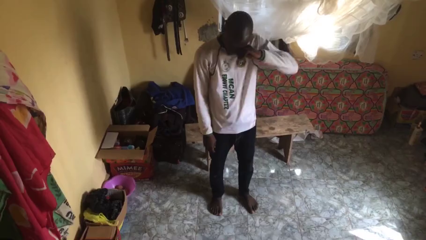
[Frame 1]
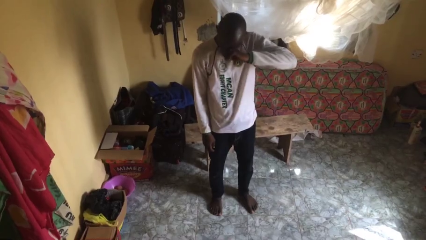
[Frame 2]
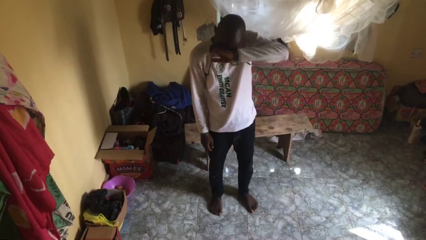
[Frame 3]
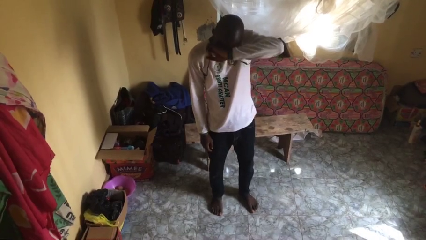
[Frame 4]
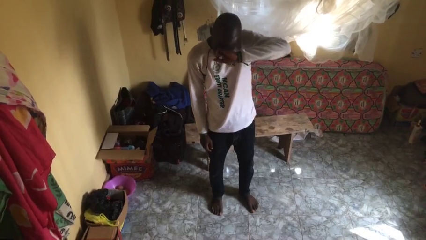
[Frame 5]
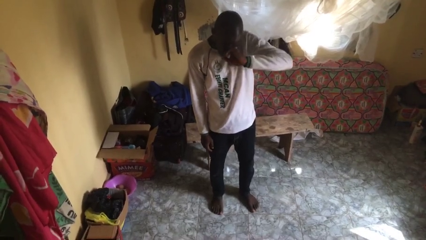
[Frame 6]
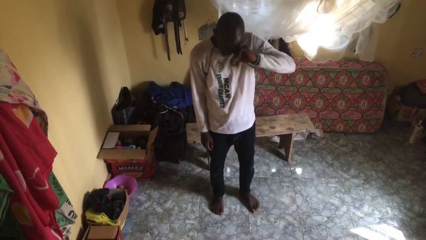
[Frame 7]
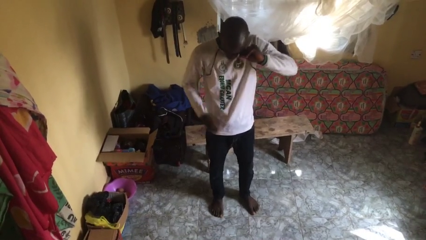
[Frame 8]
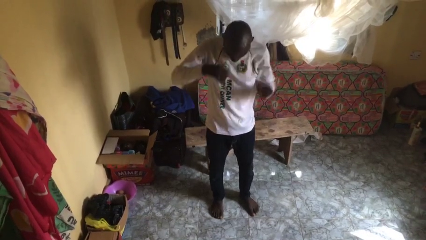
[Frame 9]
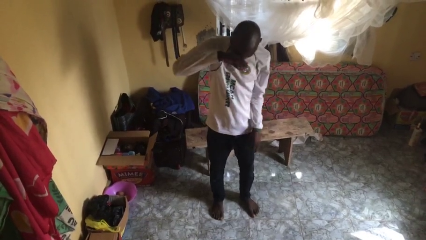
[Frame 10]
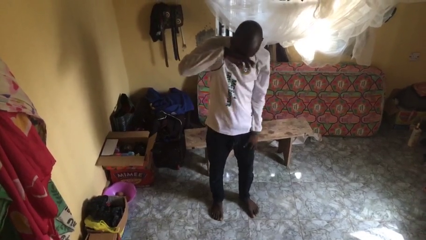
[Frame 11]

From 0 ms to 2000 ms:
person rubs eyes

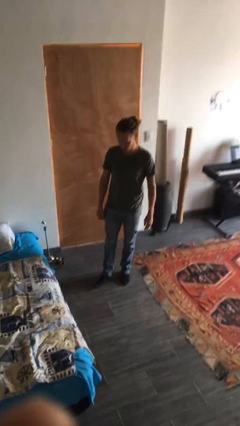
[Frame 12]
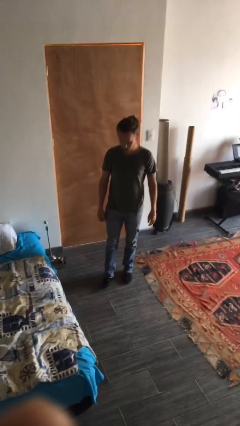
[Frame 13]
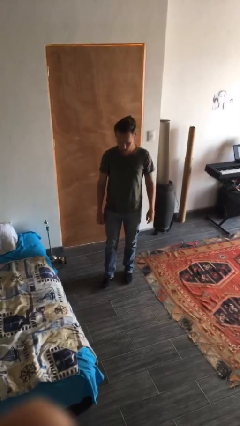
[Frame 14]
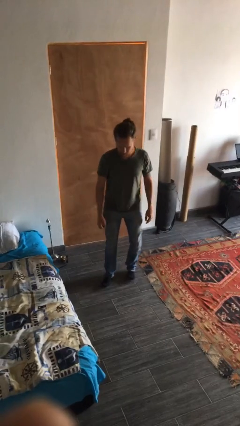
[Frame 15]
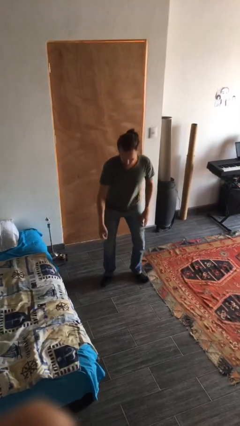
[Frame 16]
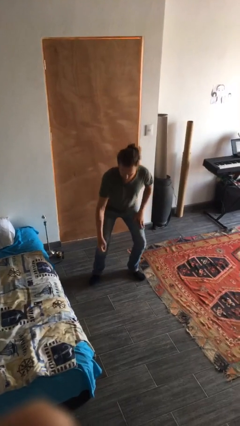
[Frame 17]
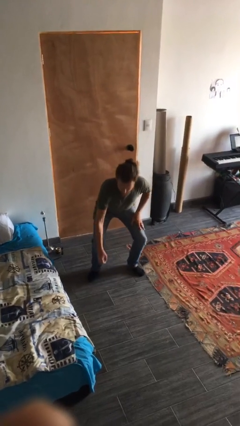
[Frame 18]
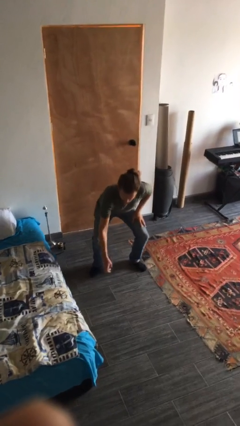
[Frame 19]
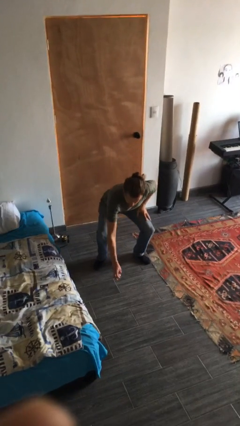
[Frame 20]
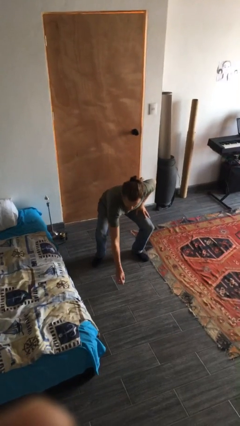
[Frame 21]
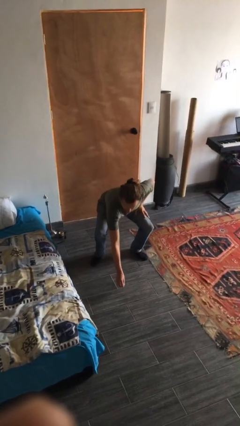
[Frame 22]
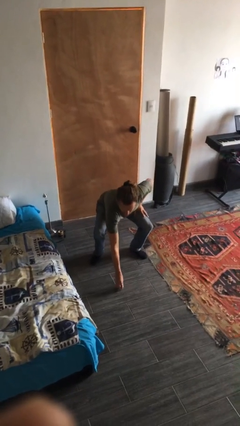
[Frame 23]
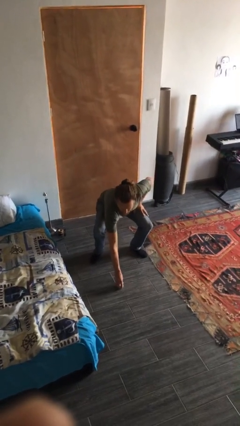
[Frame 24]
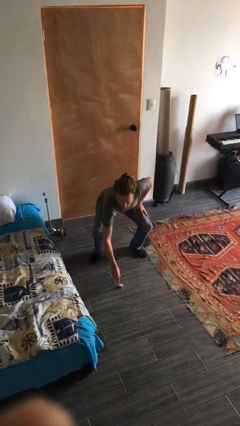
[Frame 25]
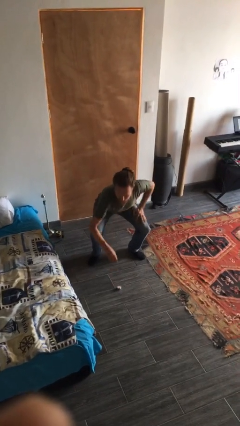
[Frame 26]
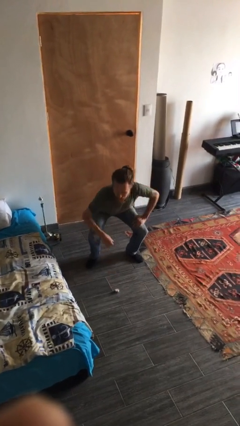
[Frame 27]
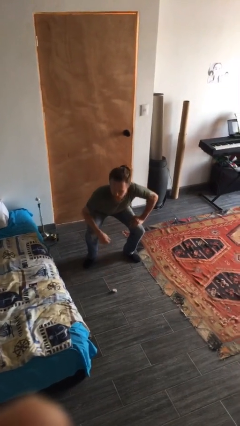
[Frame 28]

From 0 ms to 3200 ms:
person squats

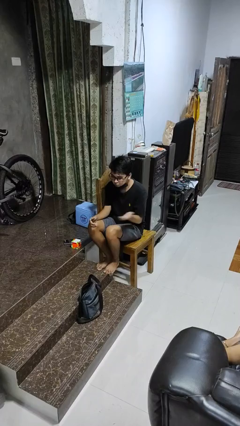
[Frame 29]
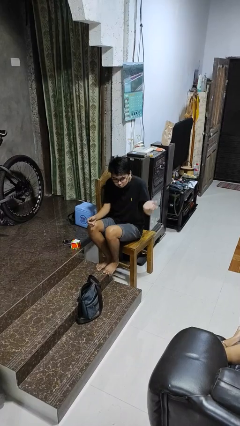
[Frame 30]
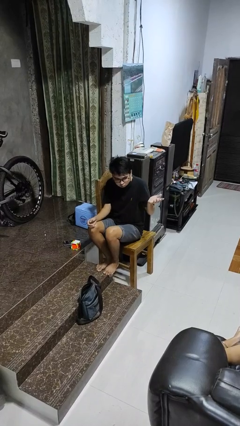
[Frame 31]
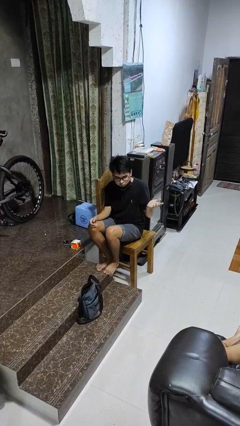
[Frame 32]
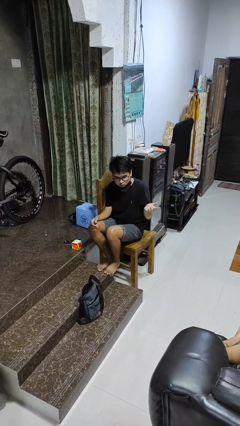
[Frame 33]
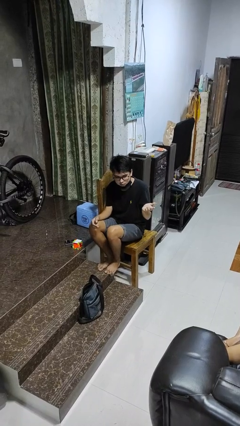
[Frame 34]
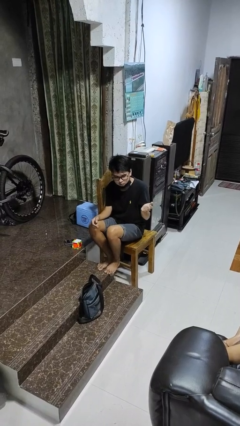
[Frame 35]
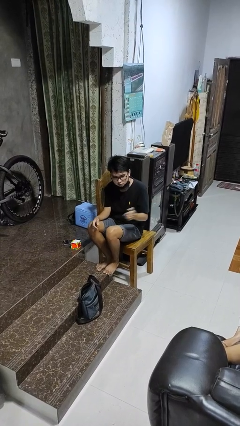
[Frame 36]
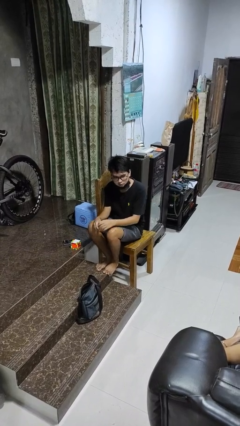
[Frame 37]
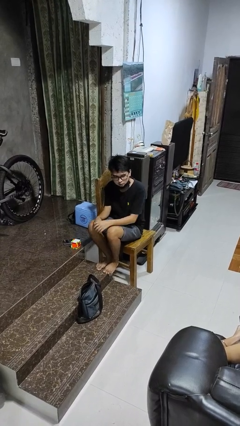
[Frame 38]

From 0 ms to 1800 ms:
person shrugs

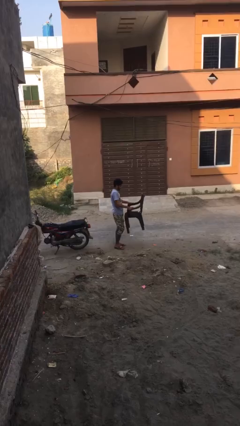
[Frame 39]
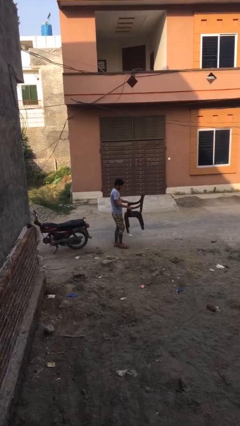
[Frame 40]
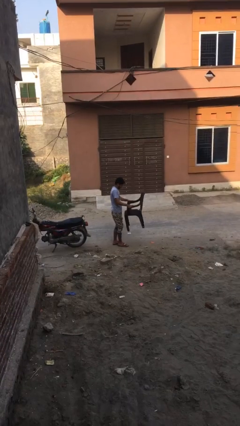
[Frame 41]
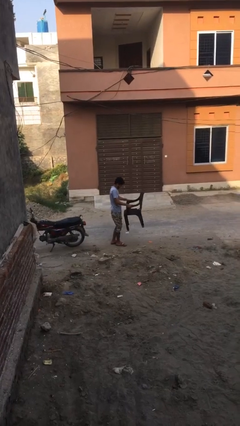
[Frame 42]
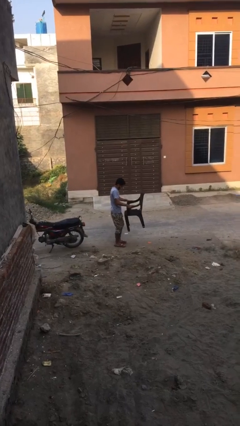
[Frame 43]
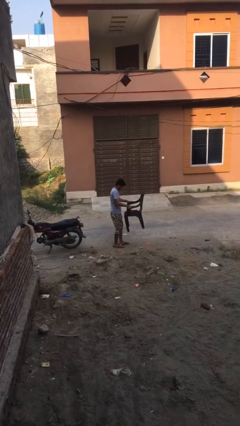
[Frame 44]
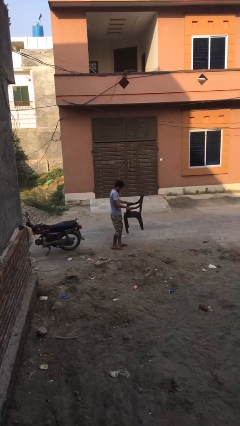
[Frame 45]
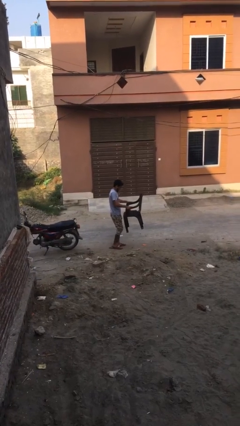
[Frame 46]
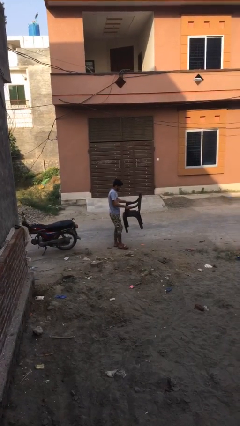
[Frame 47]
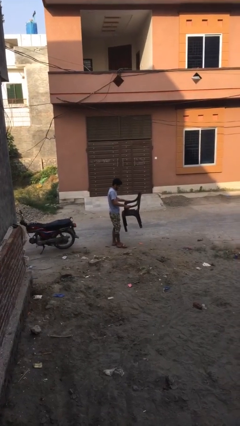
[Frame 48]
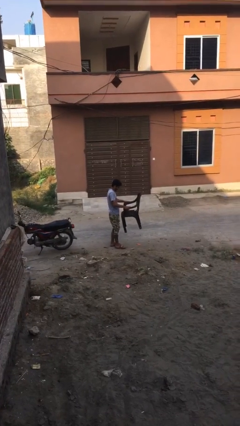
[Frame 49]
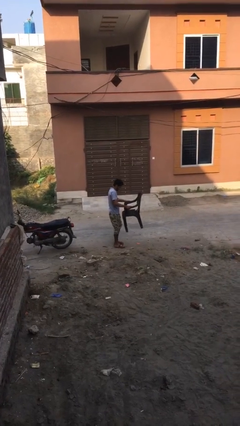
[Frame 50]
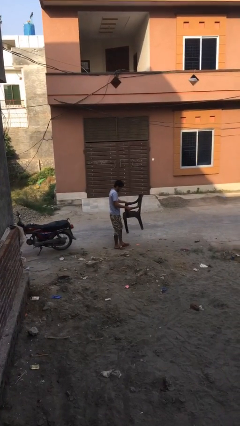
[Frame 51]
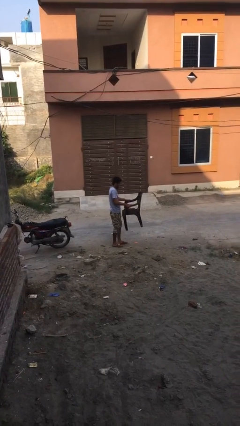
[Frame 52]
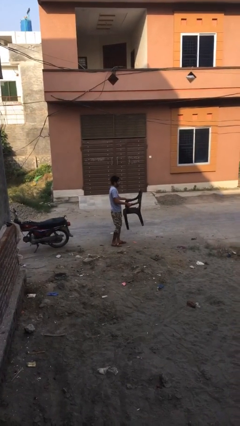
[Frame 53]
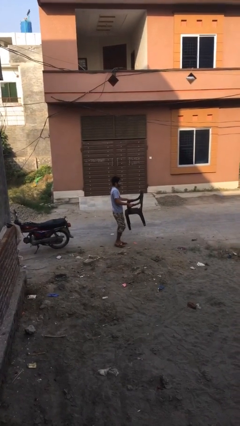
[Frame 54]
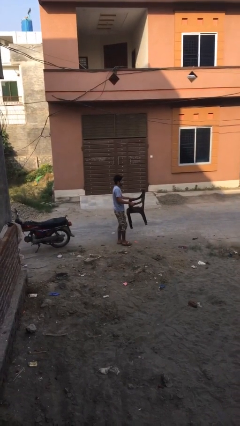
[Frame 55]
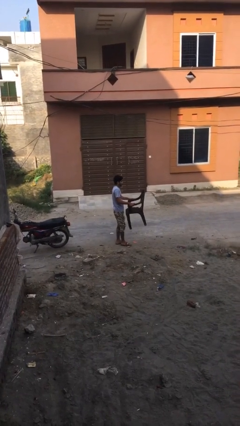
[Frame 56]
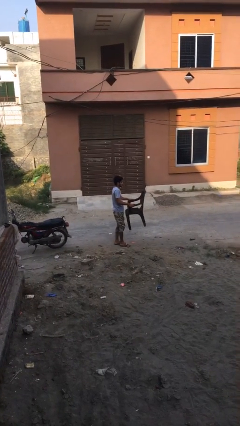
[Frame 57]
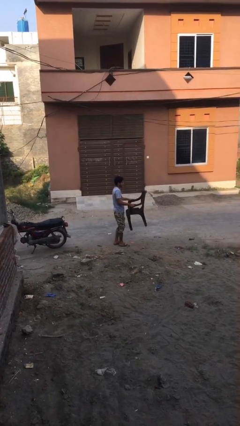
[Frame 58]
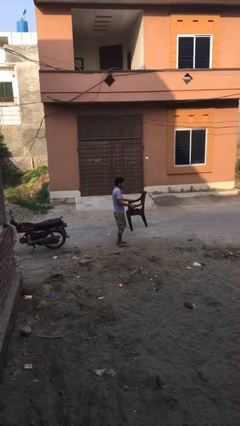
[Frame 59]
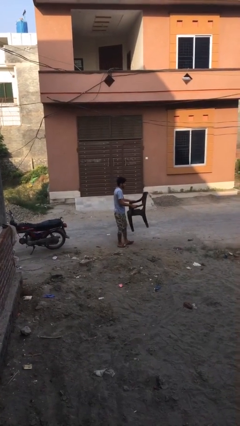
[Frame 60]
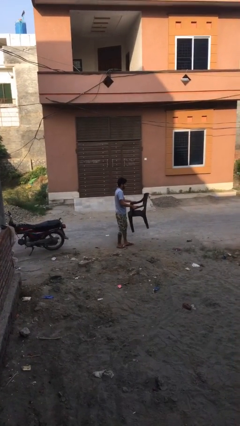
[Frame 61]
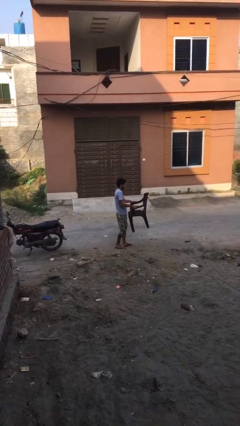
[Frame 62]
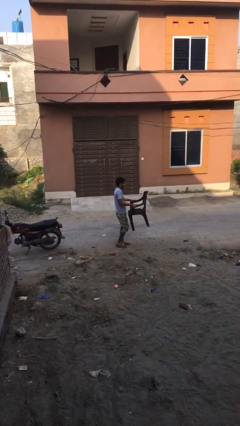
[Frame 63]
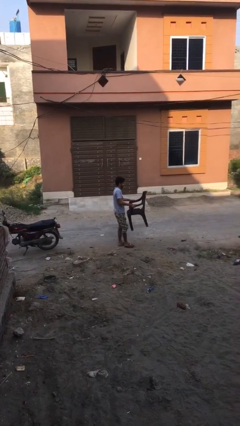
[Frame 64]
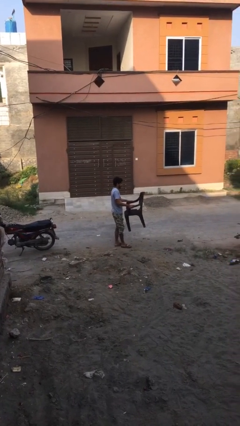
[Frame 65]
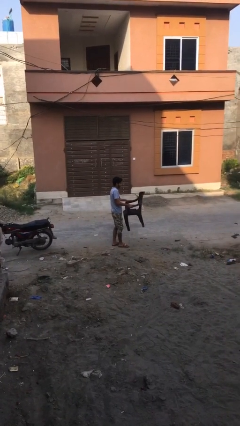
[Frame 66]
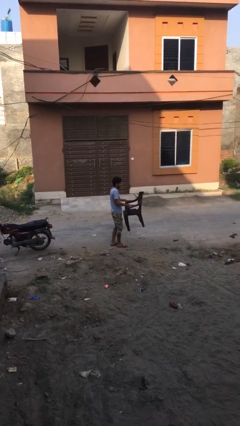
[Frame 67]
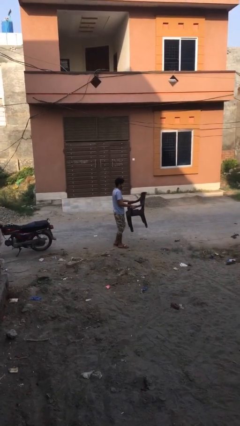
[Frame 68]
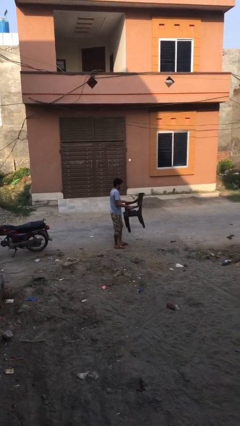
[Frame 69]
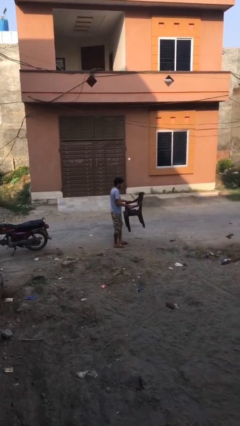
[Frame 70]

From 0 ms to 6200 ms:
person carries heavy object

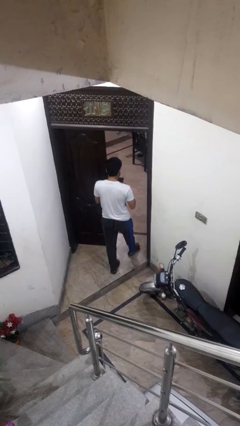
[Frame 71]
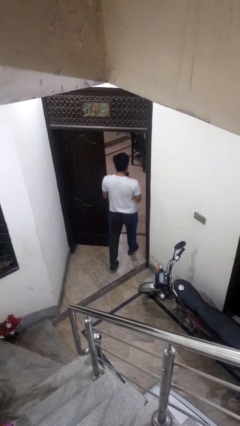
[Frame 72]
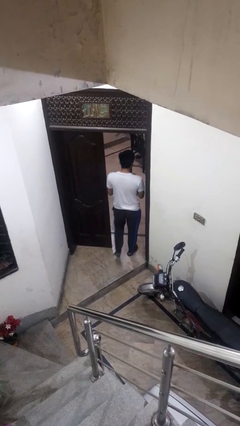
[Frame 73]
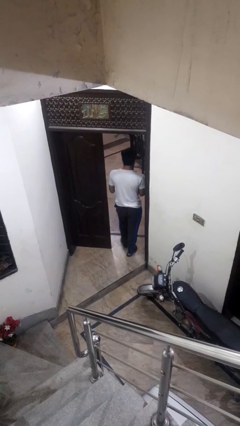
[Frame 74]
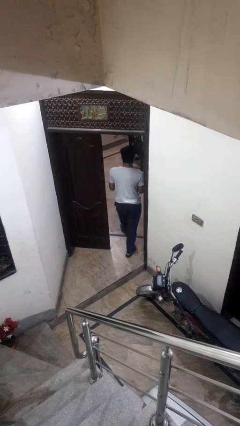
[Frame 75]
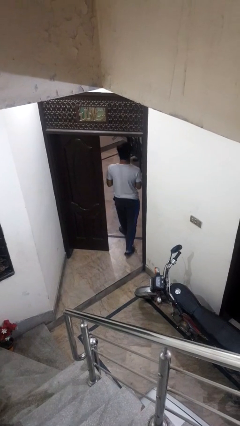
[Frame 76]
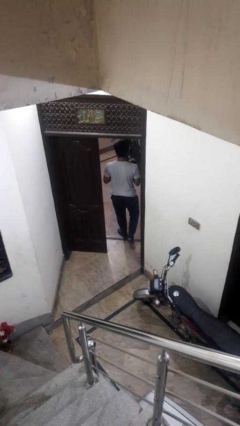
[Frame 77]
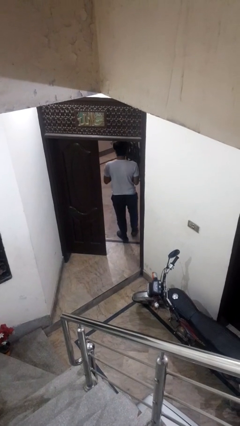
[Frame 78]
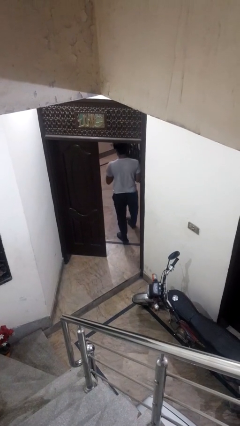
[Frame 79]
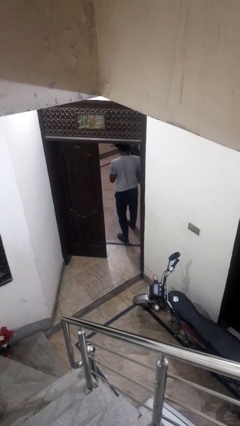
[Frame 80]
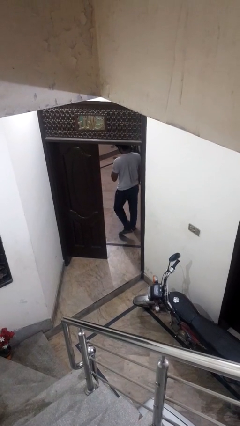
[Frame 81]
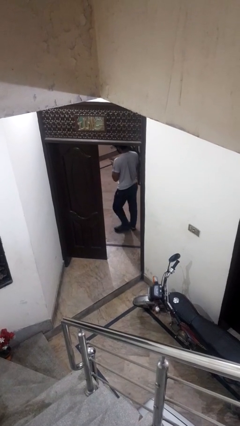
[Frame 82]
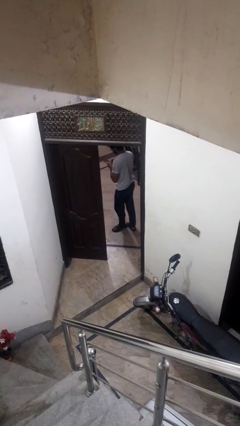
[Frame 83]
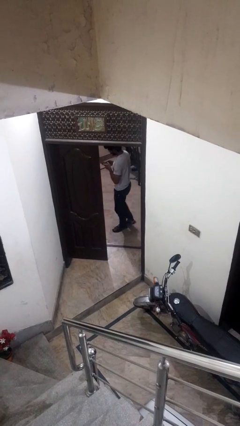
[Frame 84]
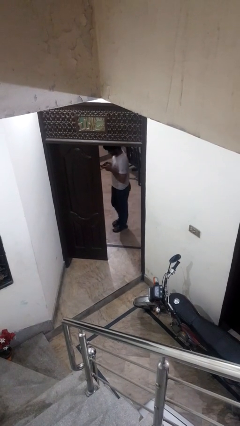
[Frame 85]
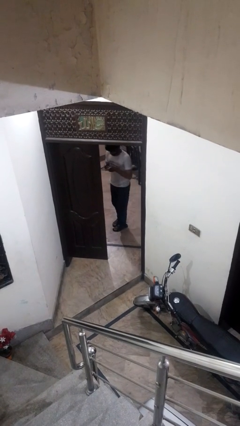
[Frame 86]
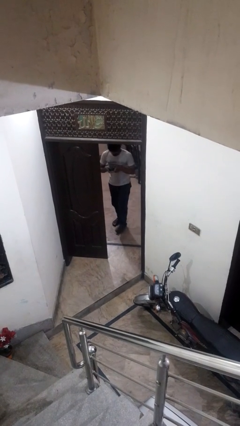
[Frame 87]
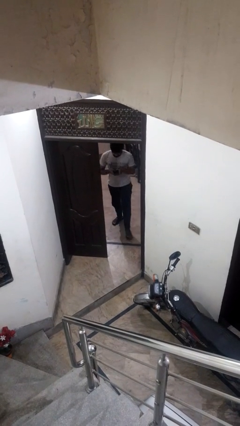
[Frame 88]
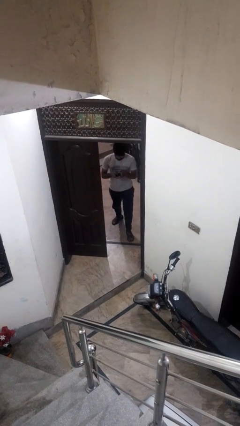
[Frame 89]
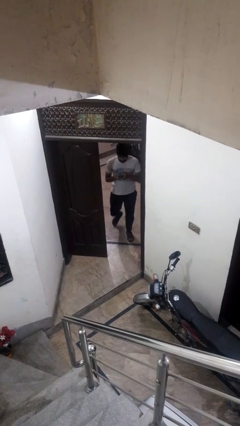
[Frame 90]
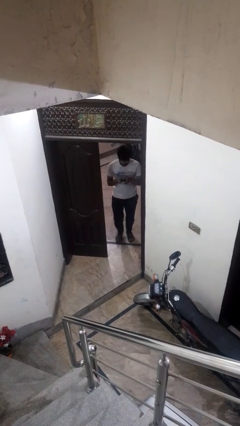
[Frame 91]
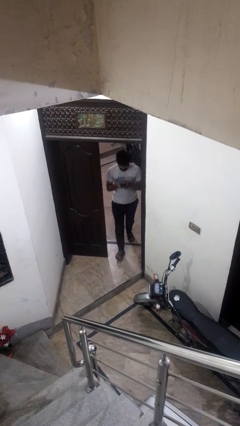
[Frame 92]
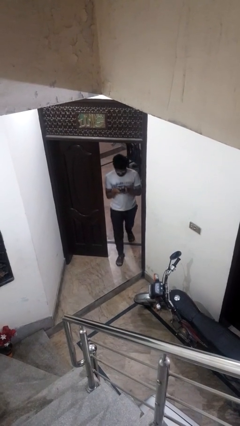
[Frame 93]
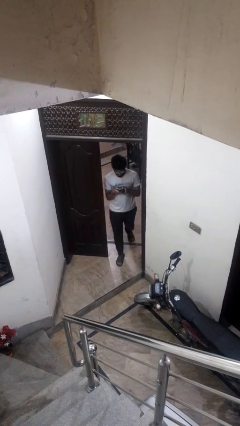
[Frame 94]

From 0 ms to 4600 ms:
person exits scene through structure
